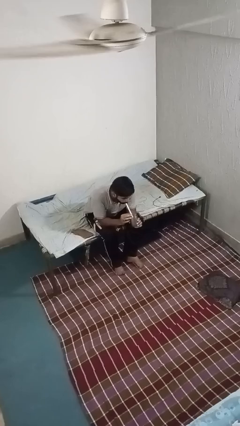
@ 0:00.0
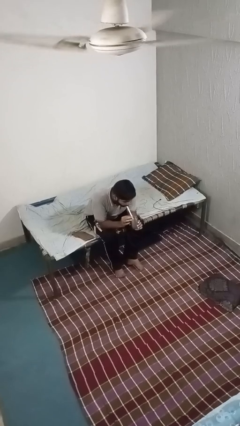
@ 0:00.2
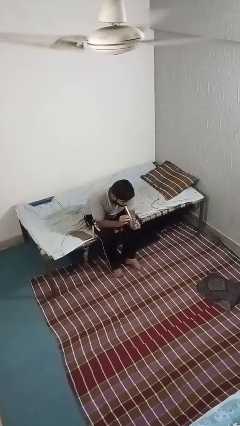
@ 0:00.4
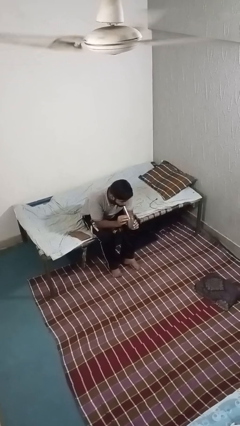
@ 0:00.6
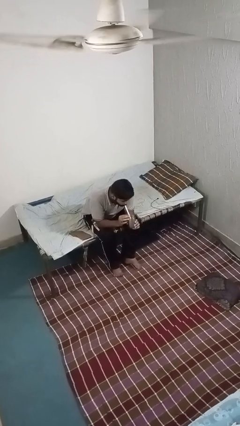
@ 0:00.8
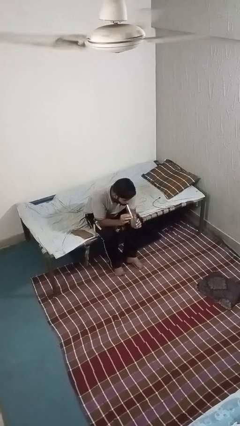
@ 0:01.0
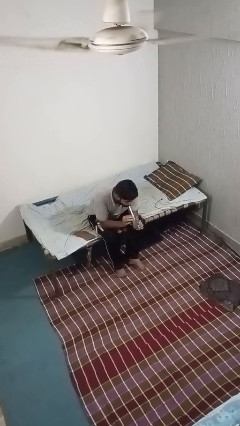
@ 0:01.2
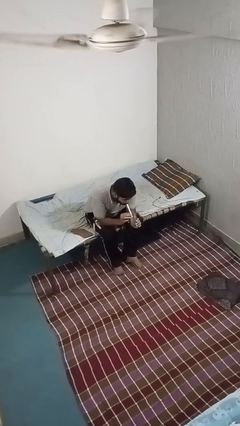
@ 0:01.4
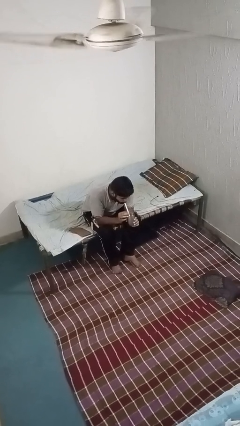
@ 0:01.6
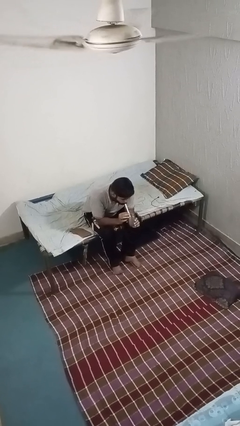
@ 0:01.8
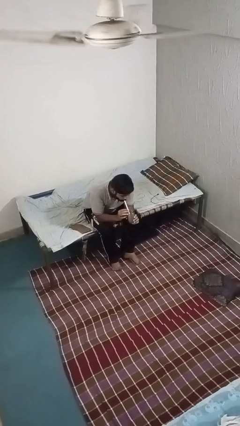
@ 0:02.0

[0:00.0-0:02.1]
person drinks from straw

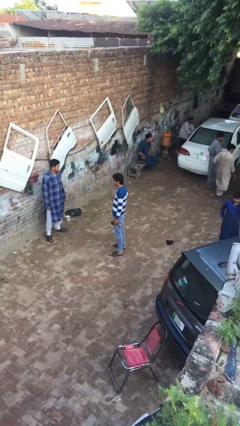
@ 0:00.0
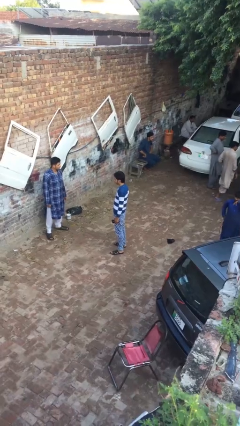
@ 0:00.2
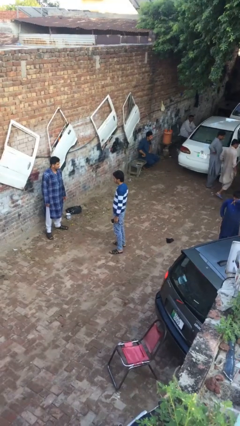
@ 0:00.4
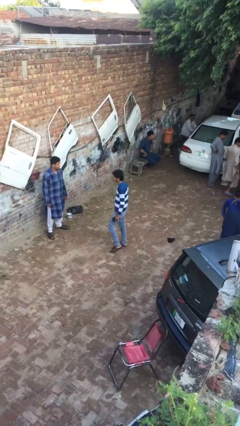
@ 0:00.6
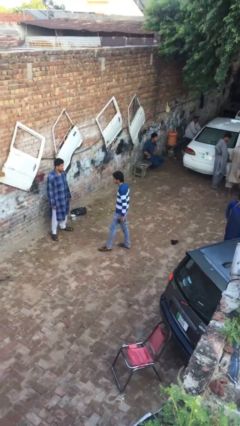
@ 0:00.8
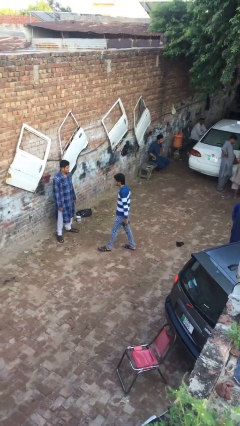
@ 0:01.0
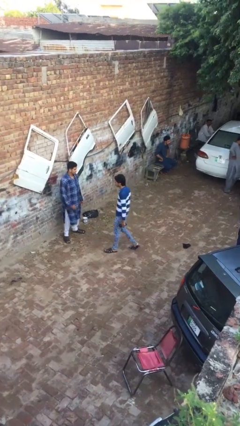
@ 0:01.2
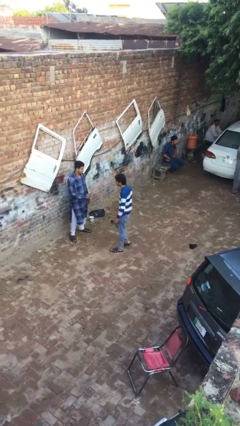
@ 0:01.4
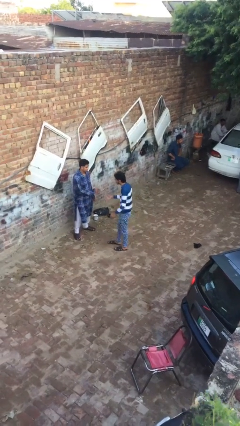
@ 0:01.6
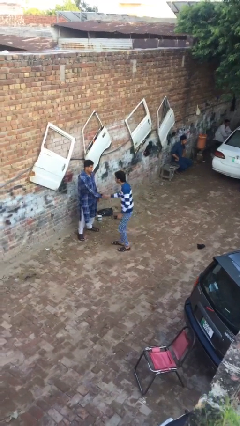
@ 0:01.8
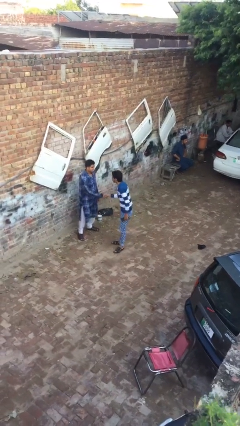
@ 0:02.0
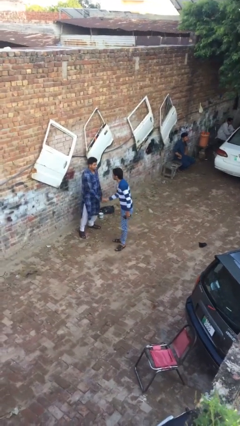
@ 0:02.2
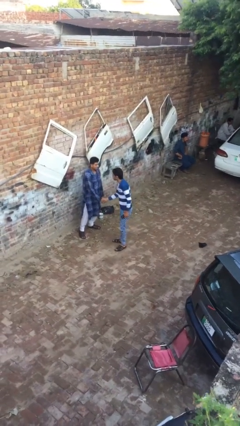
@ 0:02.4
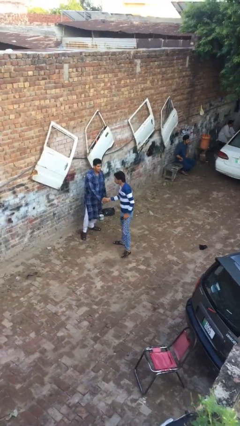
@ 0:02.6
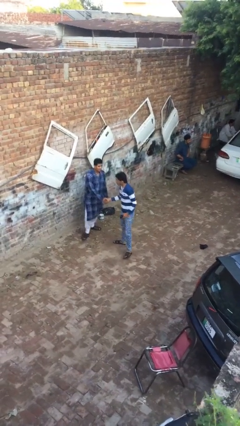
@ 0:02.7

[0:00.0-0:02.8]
person shakes hand

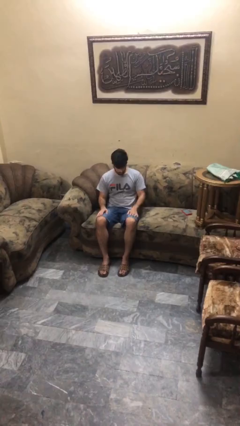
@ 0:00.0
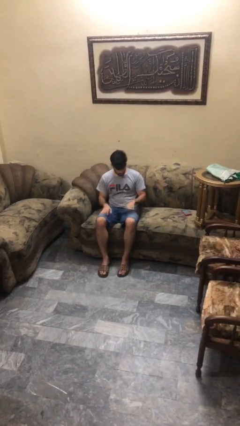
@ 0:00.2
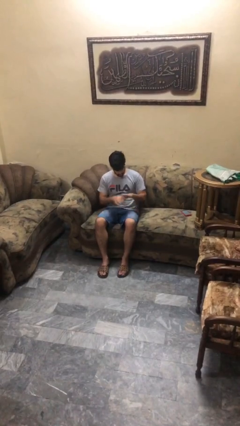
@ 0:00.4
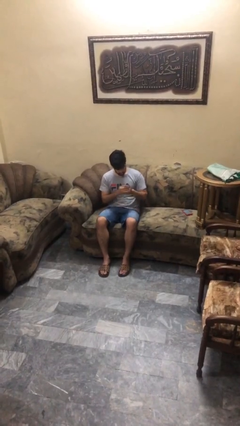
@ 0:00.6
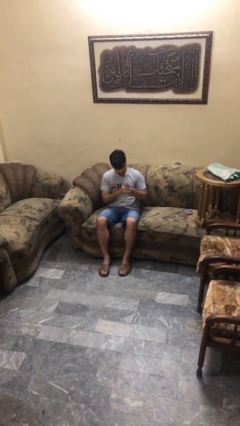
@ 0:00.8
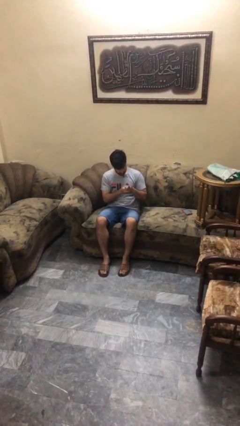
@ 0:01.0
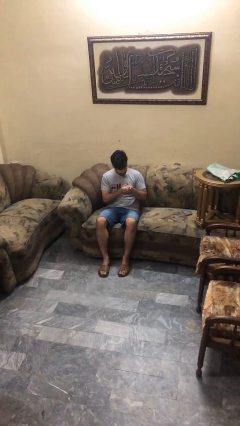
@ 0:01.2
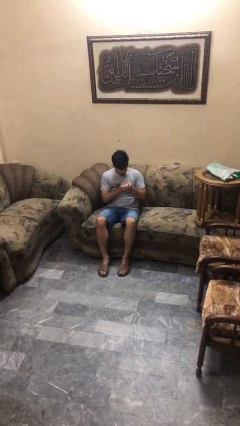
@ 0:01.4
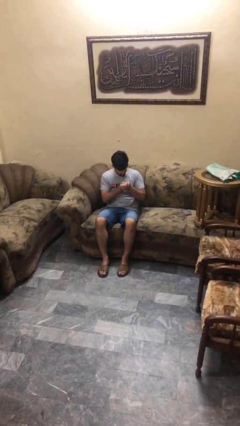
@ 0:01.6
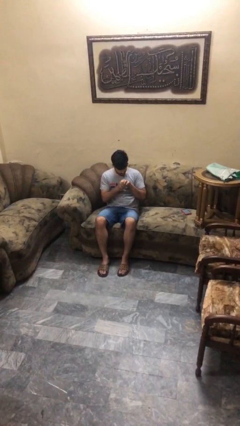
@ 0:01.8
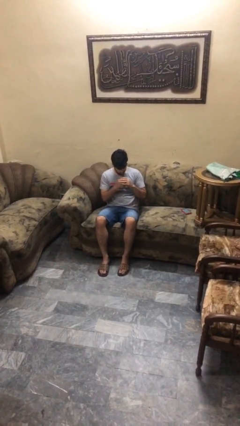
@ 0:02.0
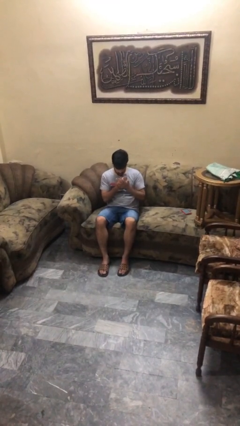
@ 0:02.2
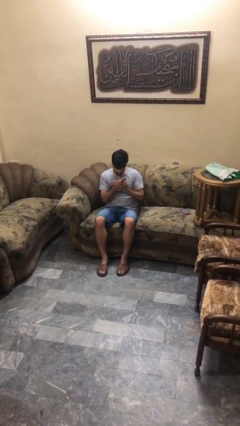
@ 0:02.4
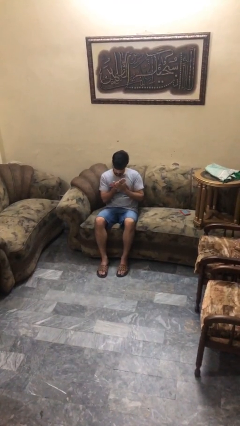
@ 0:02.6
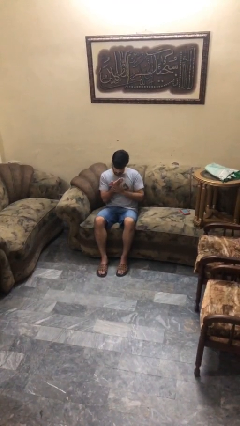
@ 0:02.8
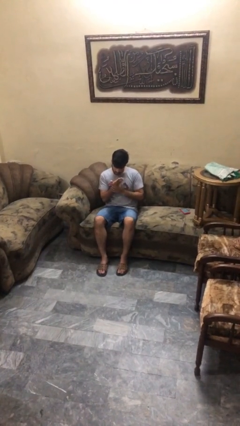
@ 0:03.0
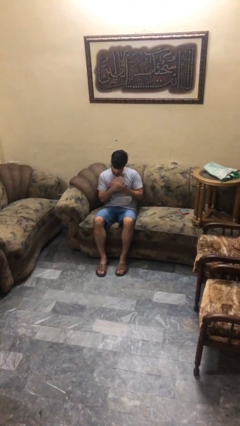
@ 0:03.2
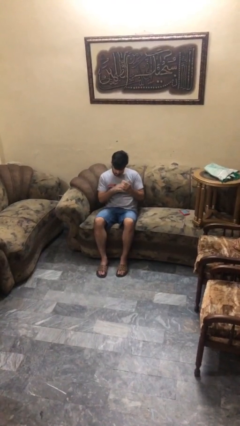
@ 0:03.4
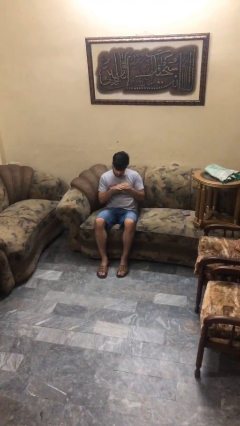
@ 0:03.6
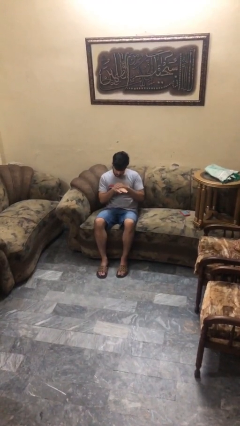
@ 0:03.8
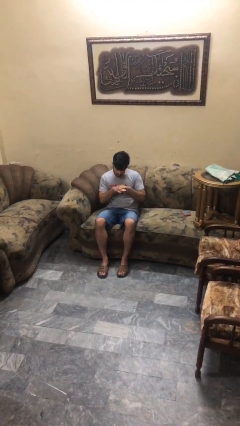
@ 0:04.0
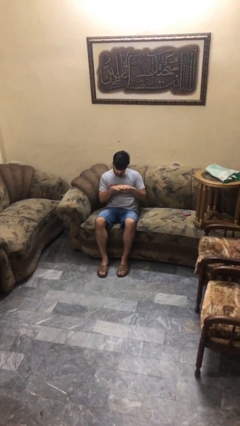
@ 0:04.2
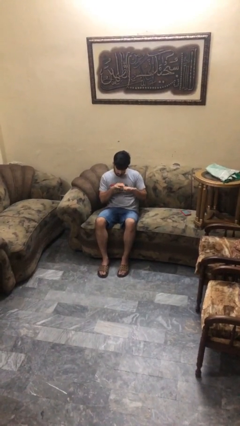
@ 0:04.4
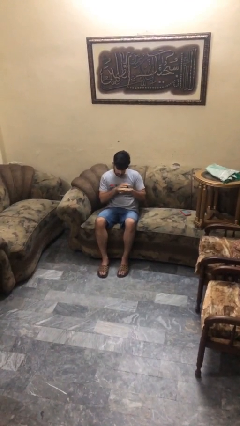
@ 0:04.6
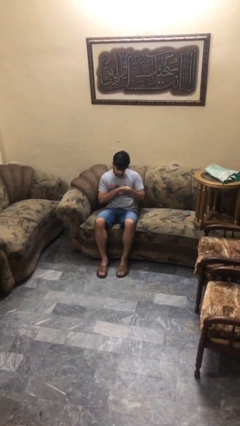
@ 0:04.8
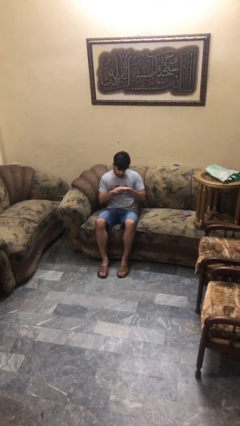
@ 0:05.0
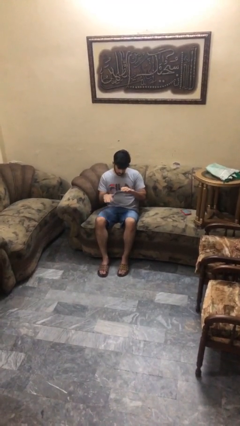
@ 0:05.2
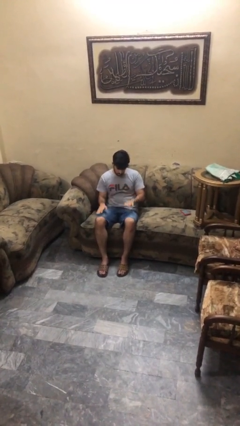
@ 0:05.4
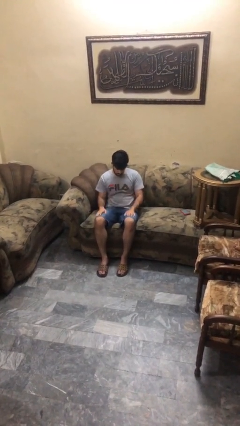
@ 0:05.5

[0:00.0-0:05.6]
person looks at hands in lap

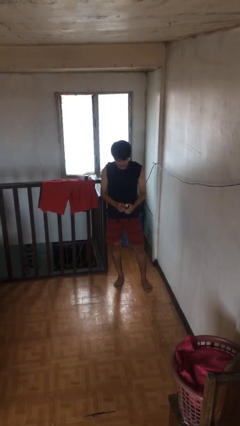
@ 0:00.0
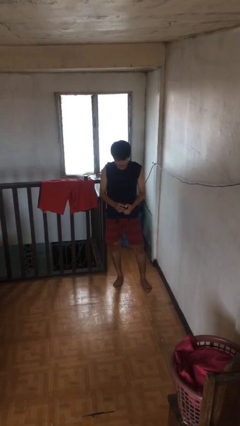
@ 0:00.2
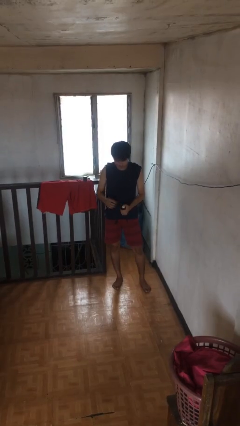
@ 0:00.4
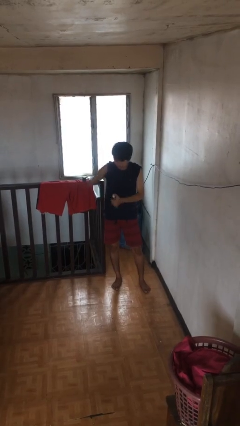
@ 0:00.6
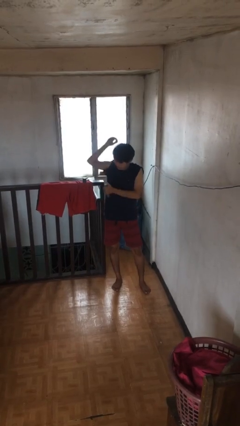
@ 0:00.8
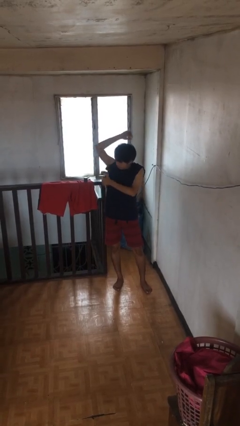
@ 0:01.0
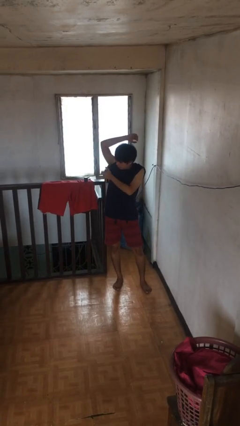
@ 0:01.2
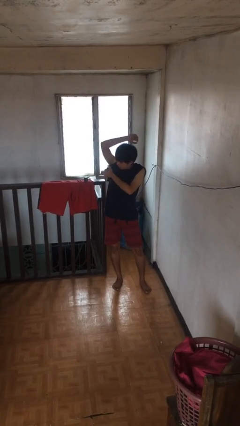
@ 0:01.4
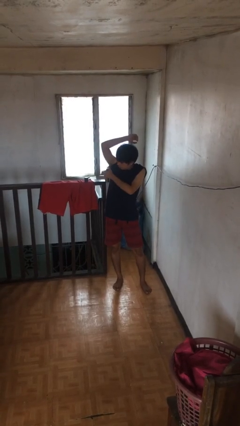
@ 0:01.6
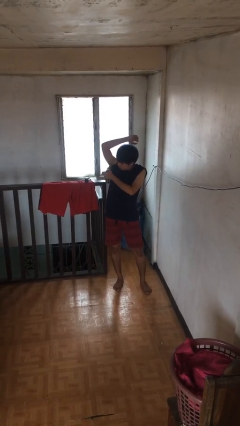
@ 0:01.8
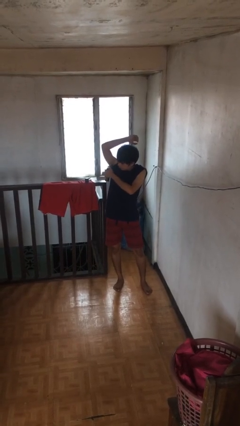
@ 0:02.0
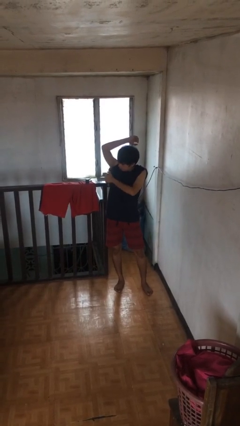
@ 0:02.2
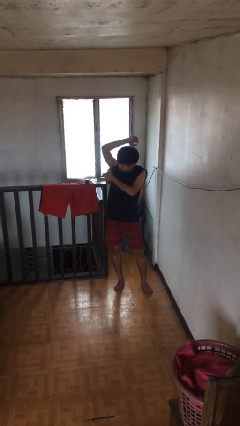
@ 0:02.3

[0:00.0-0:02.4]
person applies deodorant

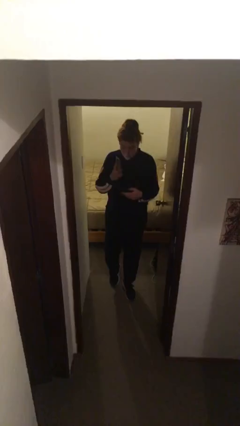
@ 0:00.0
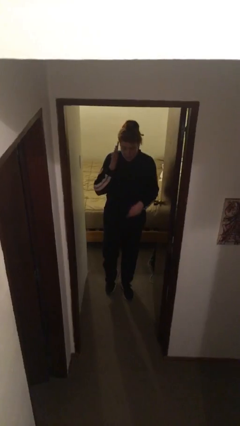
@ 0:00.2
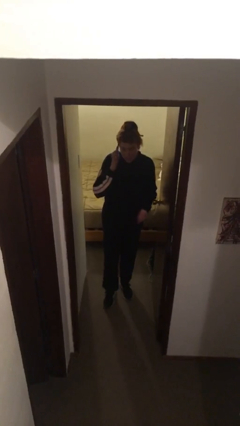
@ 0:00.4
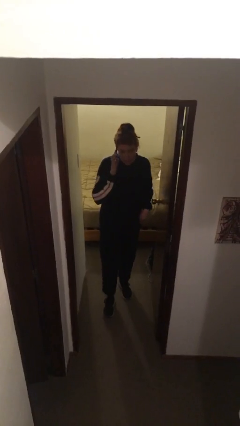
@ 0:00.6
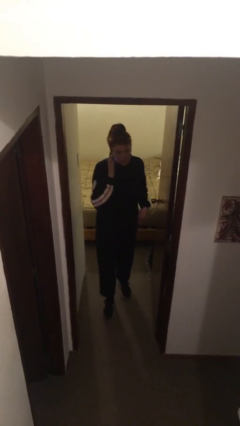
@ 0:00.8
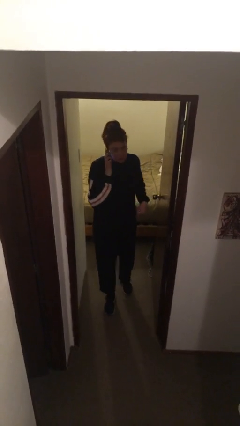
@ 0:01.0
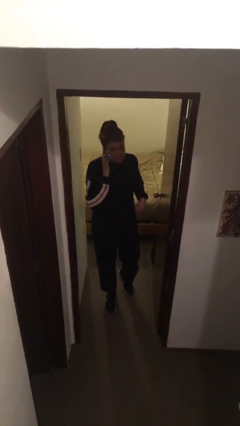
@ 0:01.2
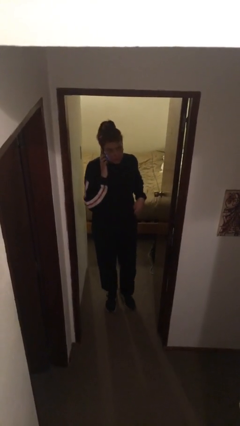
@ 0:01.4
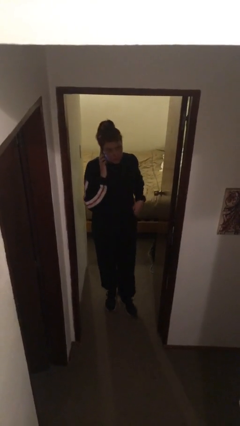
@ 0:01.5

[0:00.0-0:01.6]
person talks on phone

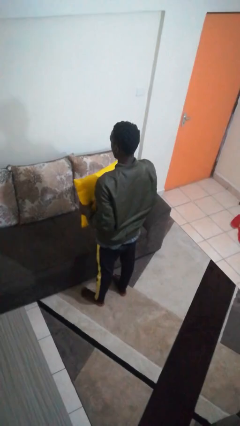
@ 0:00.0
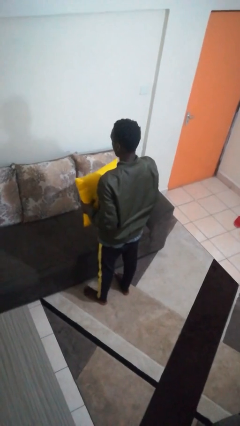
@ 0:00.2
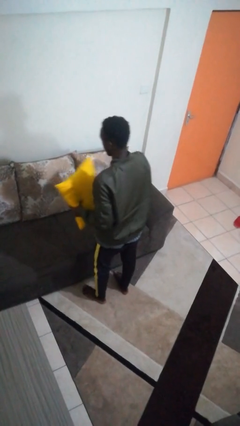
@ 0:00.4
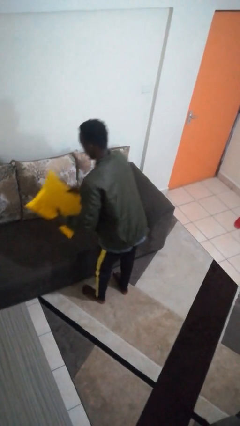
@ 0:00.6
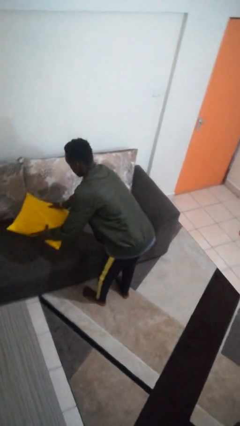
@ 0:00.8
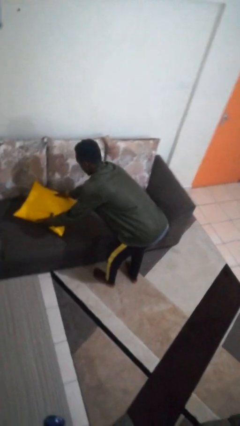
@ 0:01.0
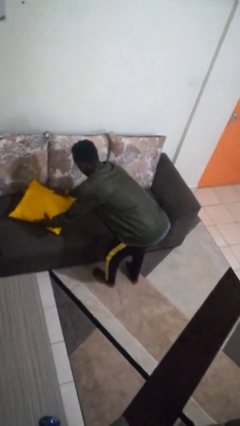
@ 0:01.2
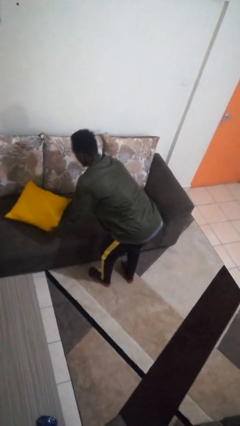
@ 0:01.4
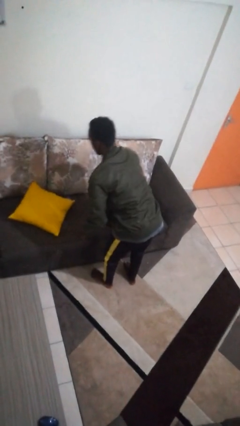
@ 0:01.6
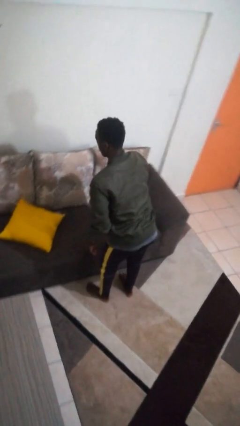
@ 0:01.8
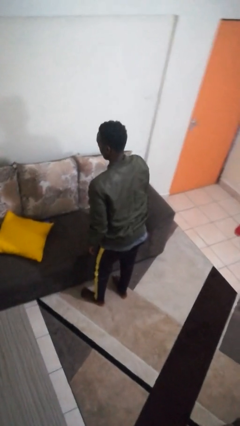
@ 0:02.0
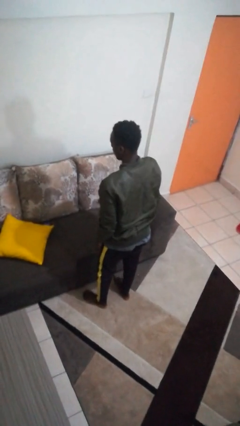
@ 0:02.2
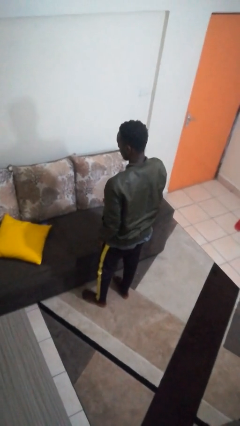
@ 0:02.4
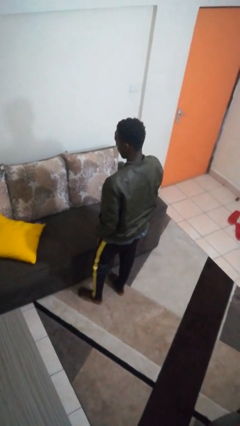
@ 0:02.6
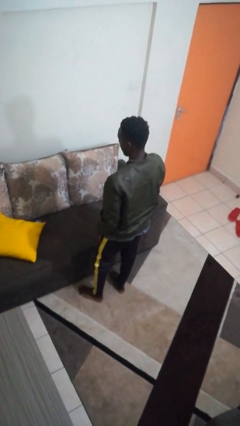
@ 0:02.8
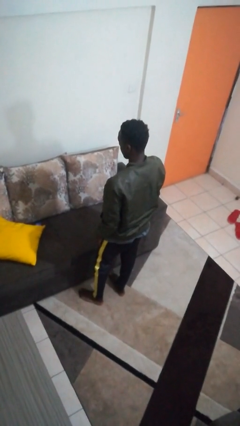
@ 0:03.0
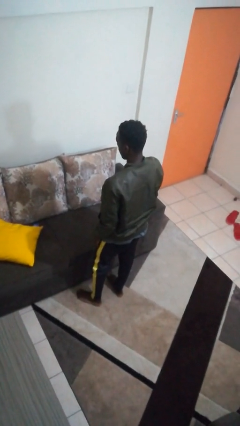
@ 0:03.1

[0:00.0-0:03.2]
person puts down object on couch
